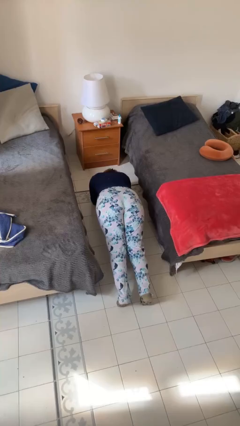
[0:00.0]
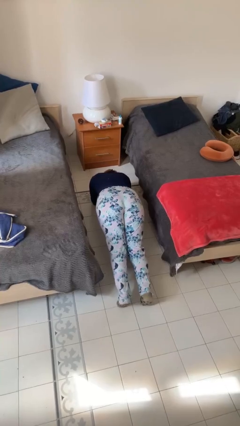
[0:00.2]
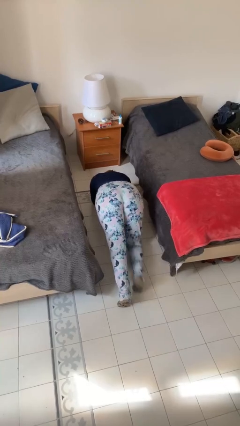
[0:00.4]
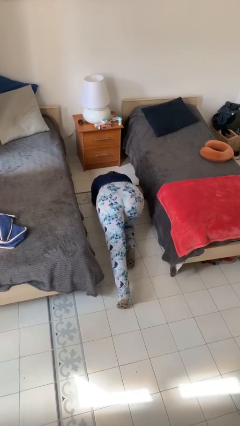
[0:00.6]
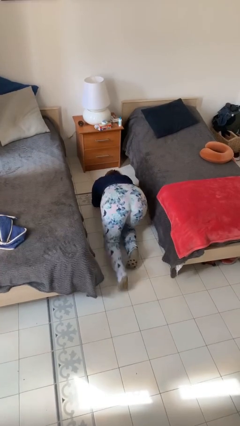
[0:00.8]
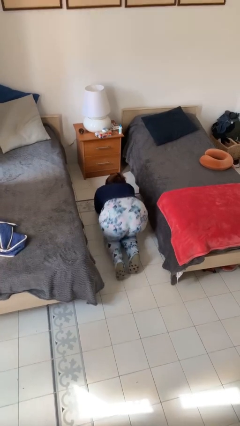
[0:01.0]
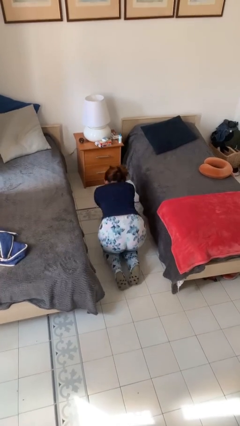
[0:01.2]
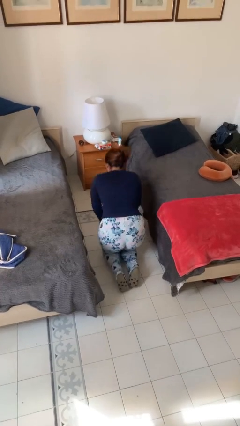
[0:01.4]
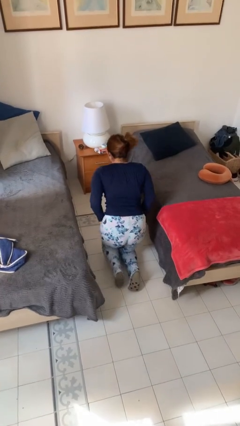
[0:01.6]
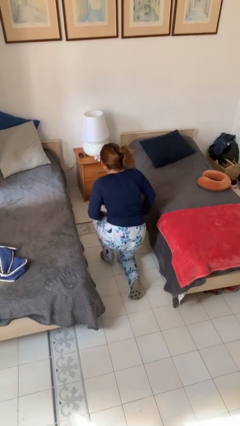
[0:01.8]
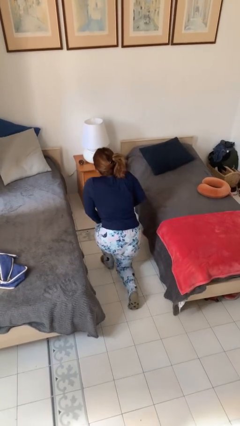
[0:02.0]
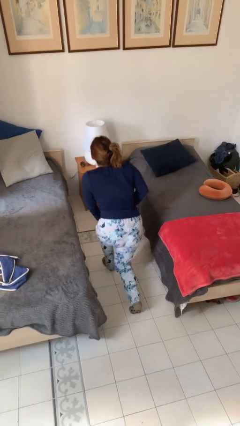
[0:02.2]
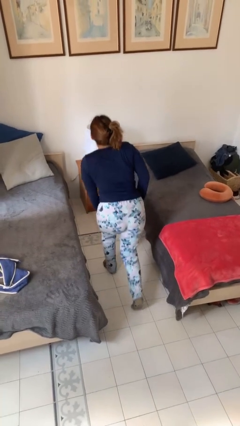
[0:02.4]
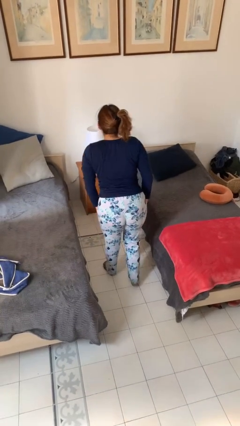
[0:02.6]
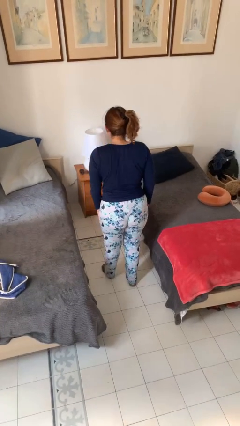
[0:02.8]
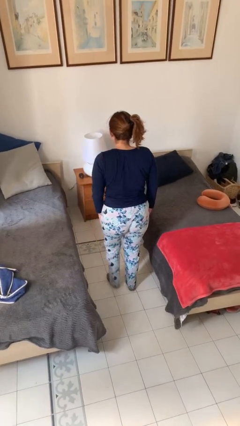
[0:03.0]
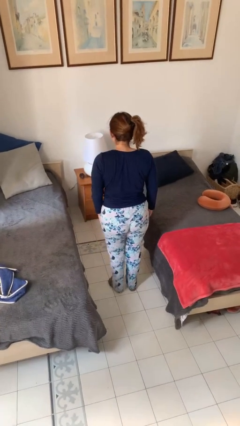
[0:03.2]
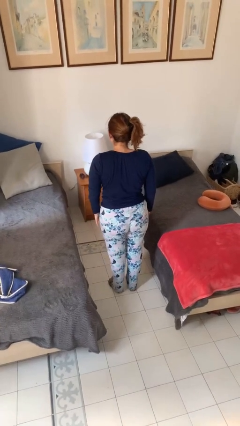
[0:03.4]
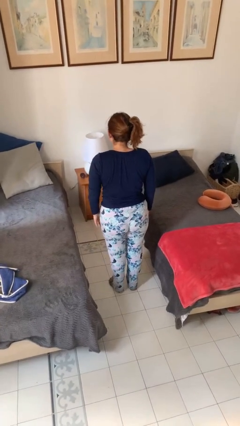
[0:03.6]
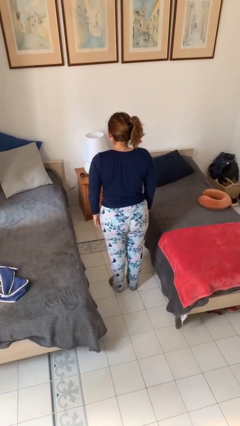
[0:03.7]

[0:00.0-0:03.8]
person stands up from floor

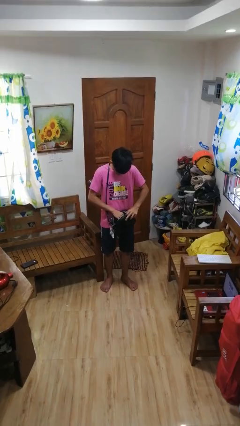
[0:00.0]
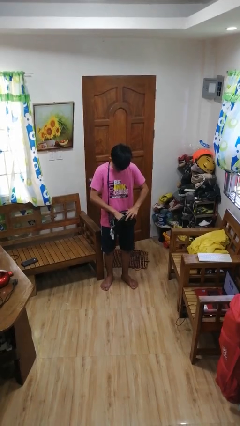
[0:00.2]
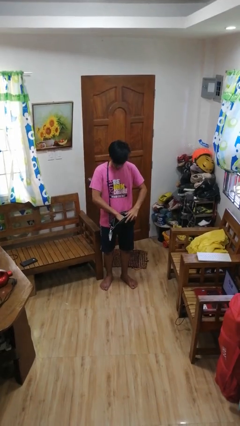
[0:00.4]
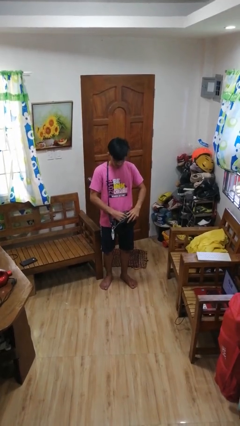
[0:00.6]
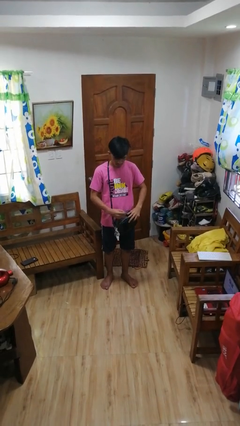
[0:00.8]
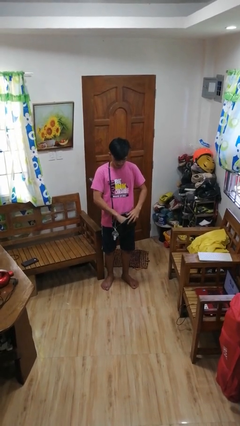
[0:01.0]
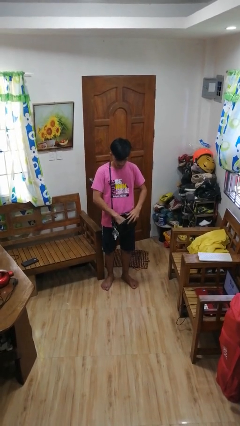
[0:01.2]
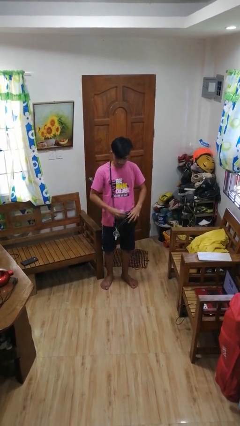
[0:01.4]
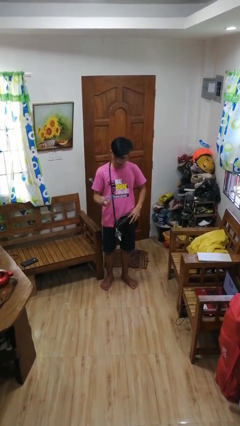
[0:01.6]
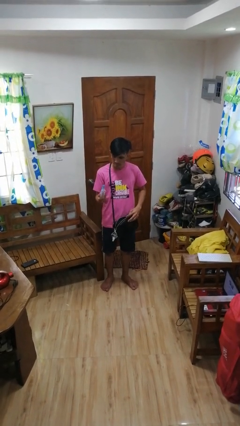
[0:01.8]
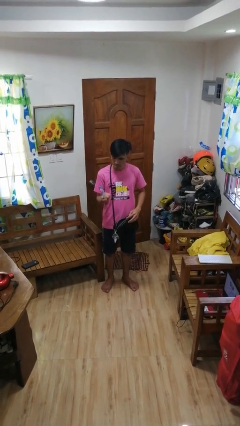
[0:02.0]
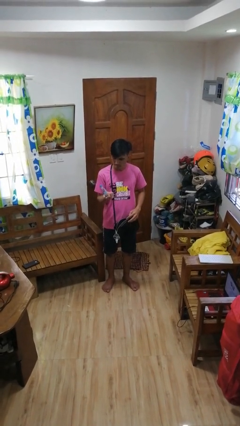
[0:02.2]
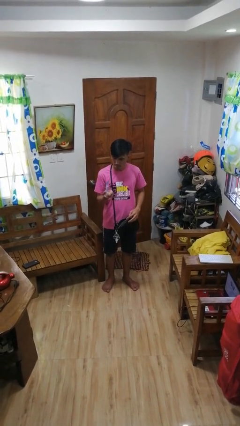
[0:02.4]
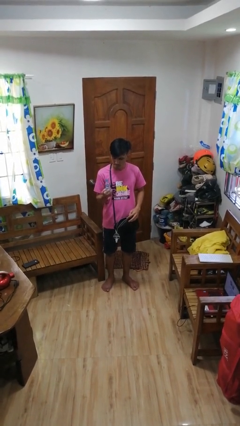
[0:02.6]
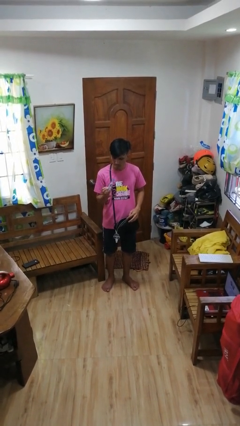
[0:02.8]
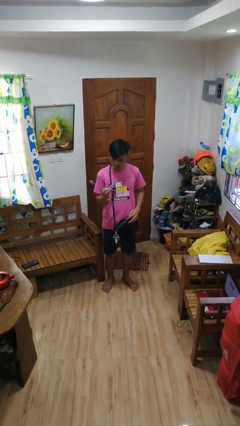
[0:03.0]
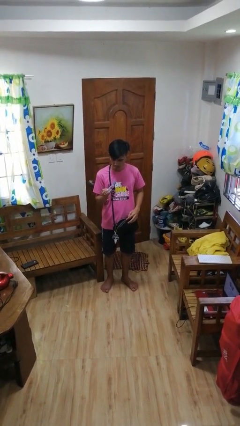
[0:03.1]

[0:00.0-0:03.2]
person takes object from purse

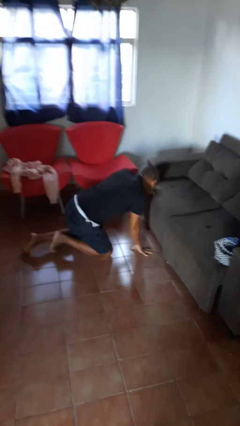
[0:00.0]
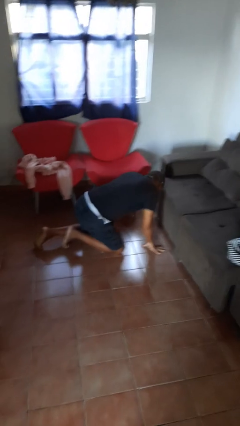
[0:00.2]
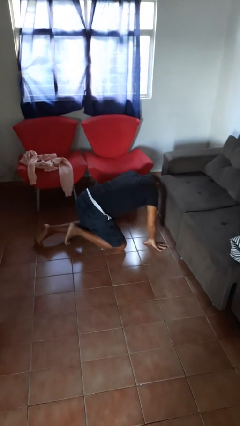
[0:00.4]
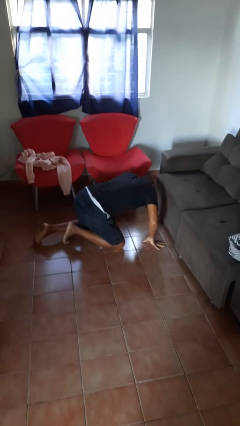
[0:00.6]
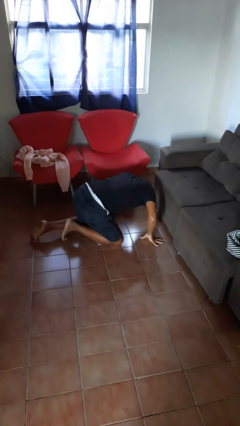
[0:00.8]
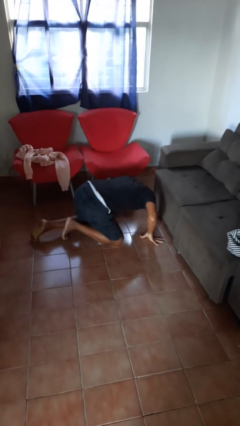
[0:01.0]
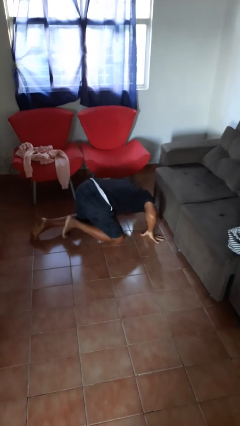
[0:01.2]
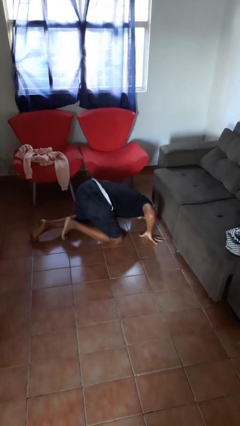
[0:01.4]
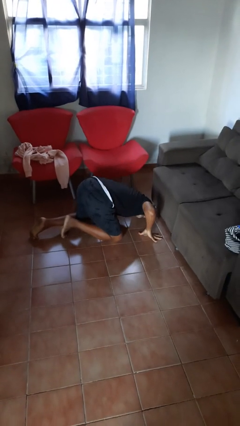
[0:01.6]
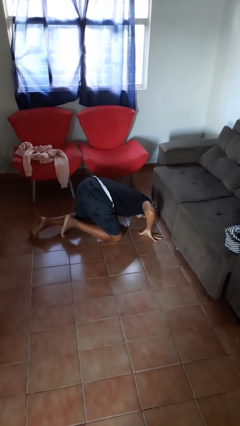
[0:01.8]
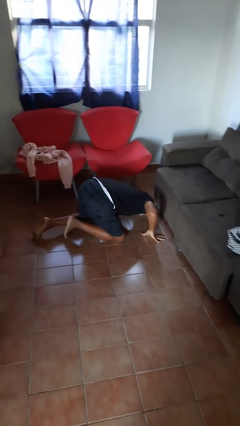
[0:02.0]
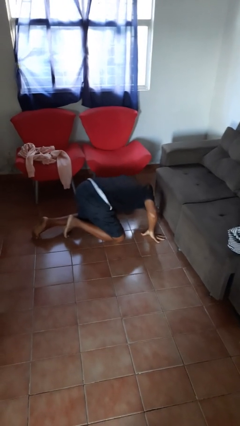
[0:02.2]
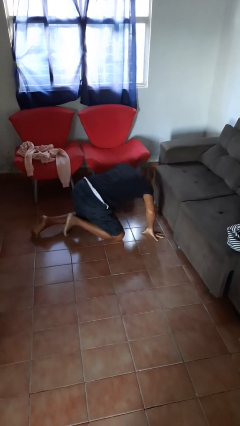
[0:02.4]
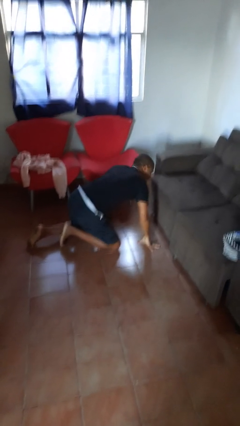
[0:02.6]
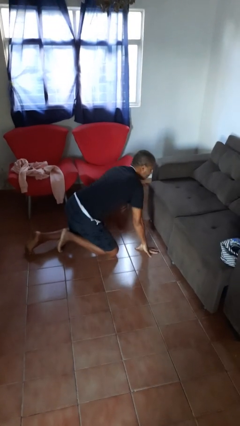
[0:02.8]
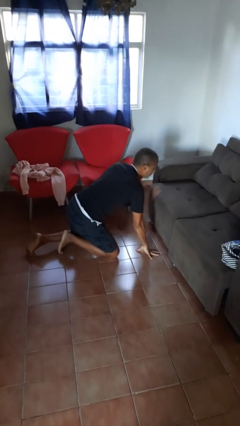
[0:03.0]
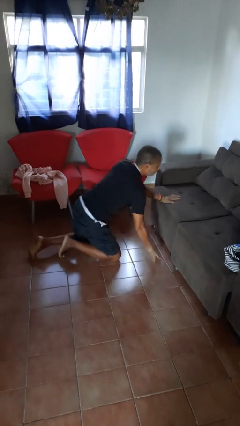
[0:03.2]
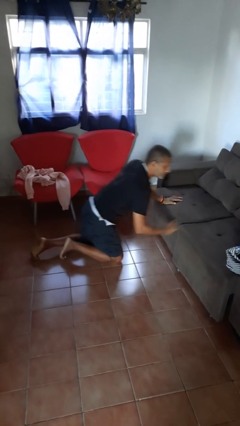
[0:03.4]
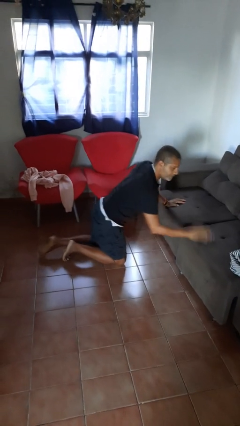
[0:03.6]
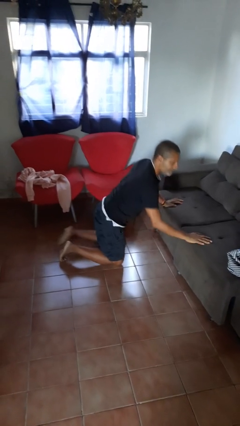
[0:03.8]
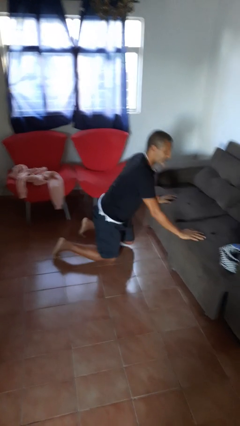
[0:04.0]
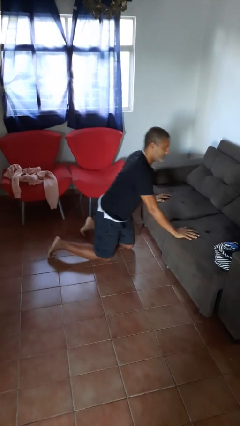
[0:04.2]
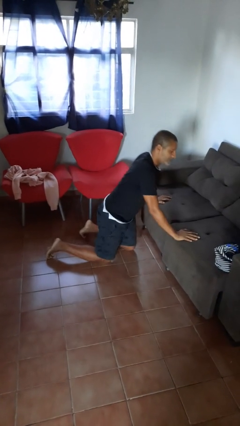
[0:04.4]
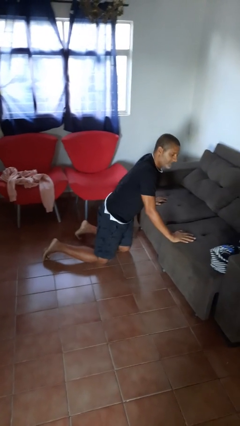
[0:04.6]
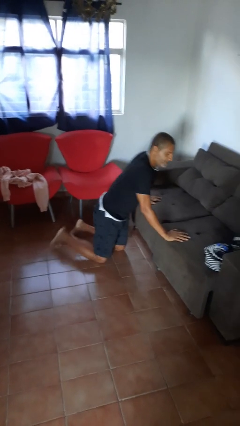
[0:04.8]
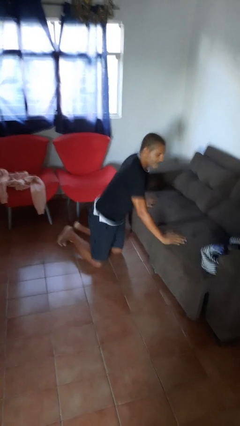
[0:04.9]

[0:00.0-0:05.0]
person searches under couch

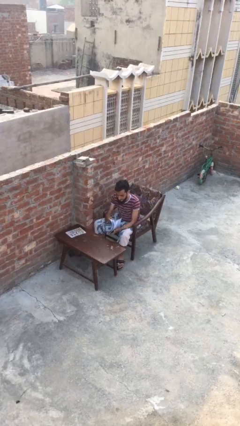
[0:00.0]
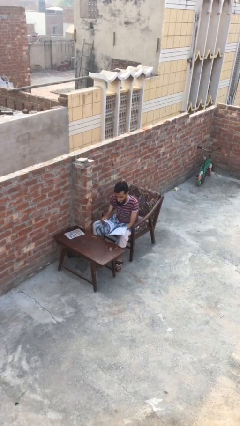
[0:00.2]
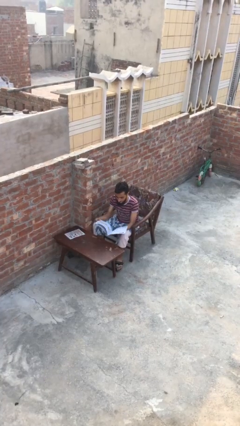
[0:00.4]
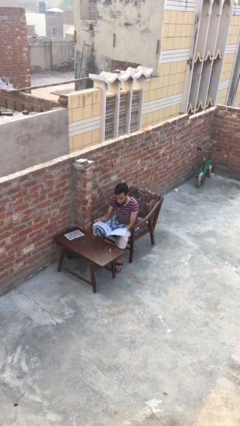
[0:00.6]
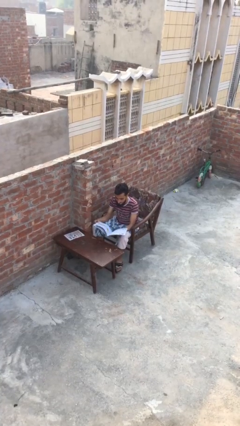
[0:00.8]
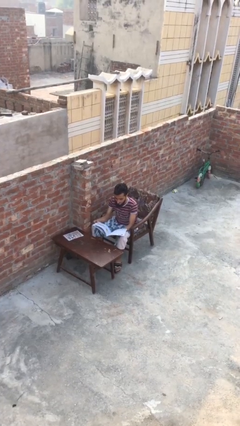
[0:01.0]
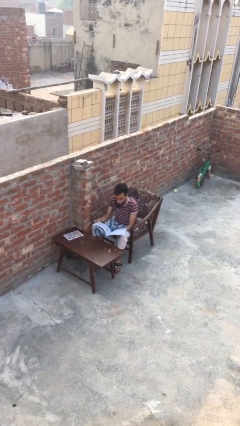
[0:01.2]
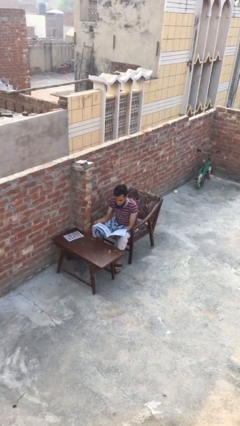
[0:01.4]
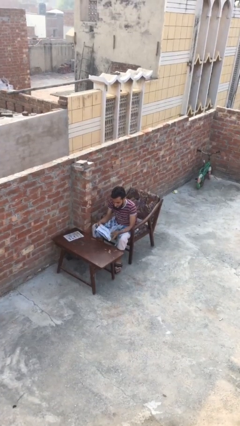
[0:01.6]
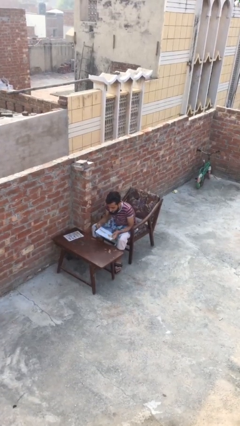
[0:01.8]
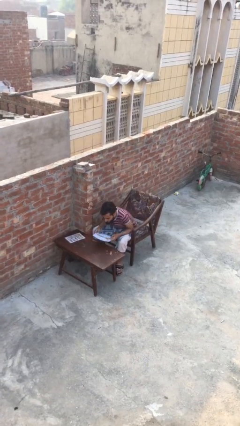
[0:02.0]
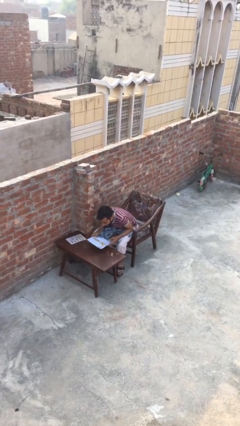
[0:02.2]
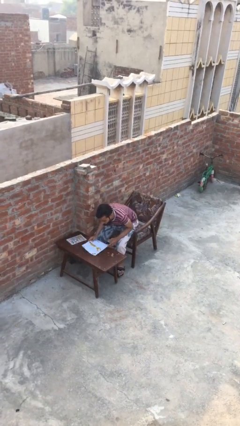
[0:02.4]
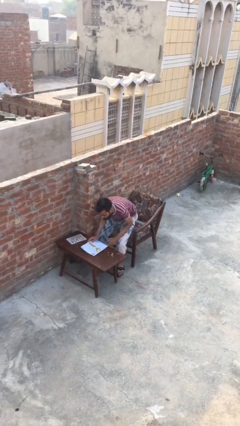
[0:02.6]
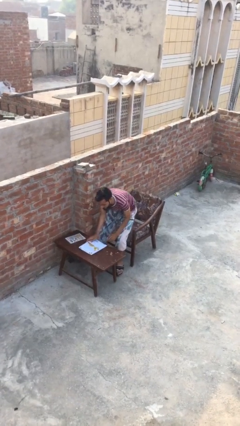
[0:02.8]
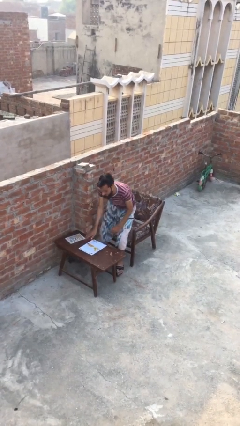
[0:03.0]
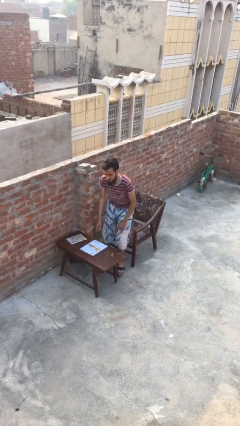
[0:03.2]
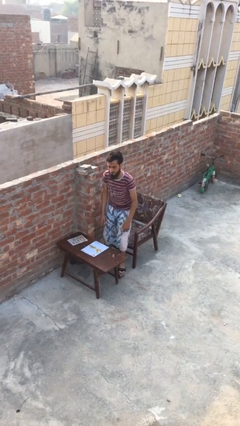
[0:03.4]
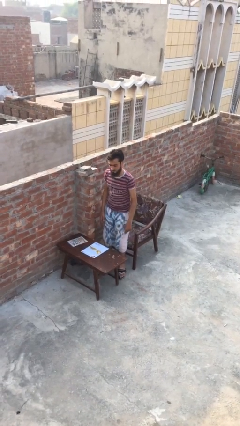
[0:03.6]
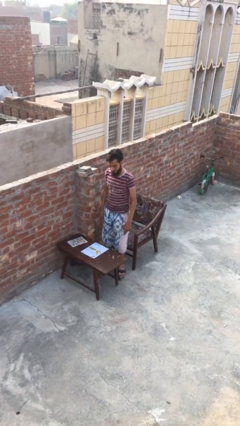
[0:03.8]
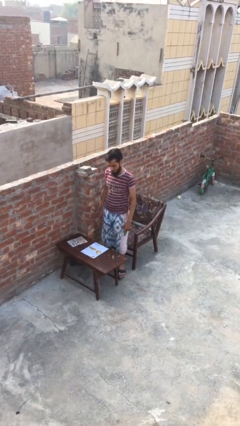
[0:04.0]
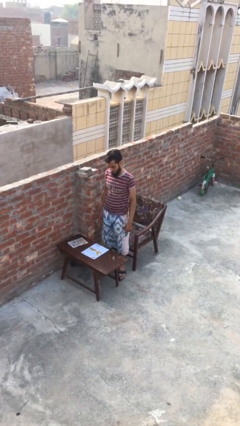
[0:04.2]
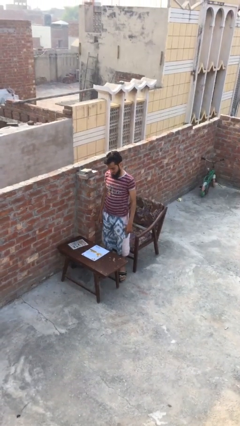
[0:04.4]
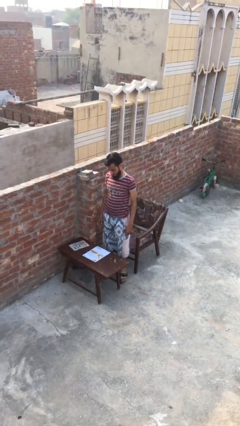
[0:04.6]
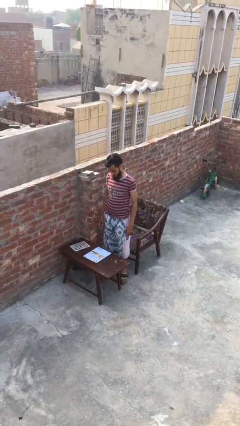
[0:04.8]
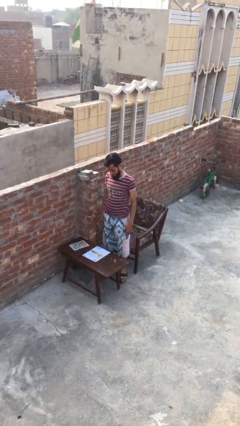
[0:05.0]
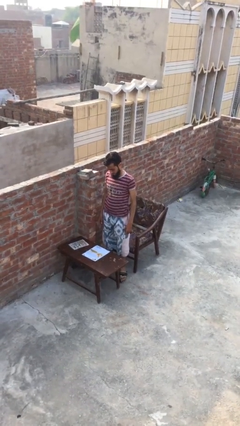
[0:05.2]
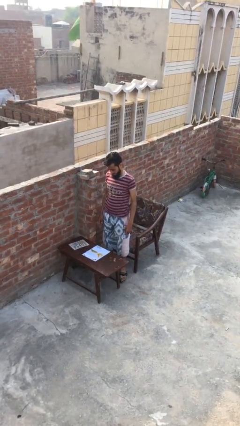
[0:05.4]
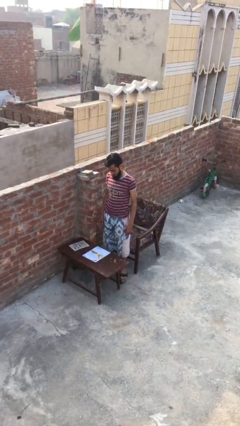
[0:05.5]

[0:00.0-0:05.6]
person stands up
